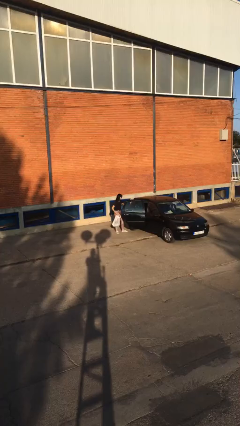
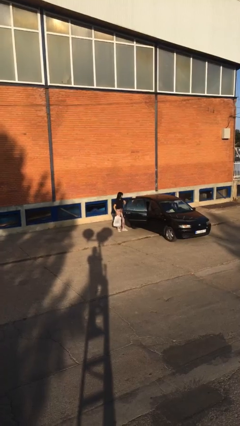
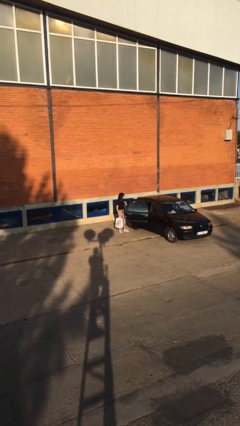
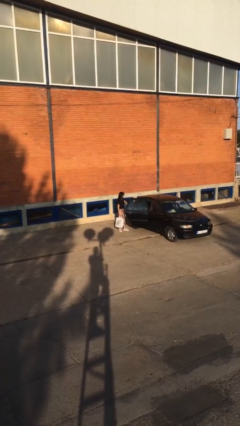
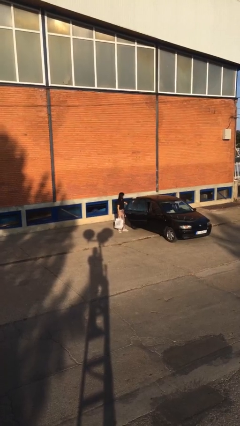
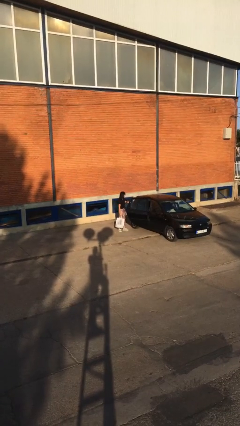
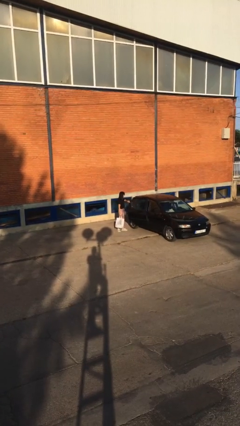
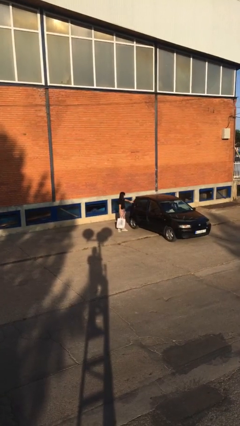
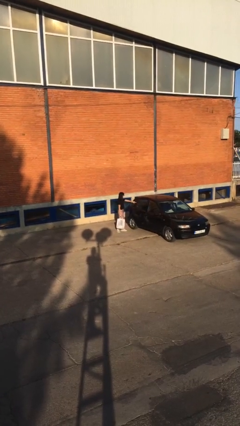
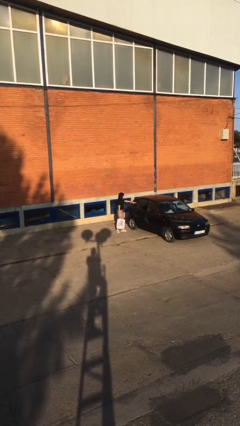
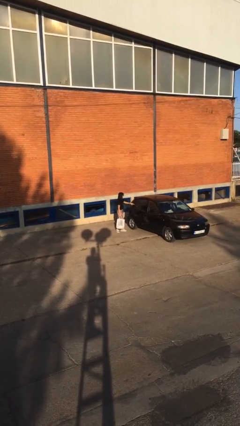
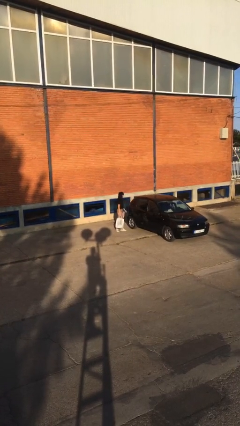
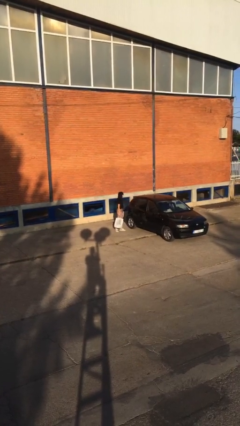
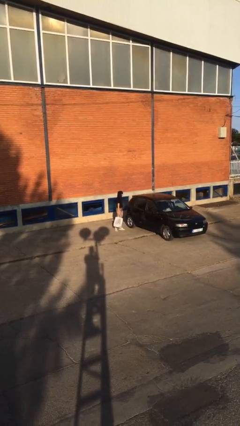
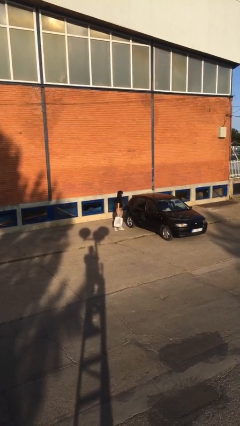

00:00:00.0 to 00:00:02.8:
person closes car door

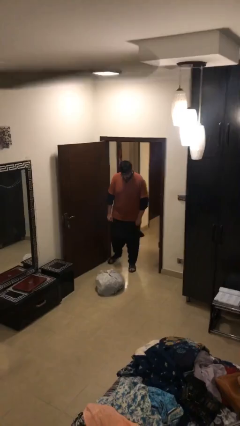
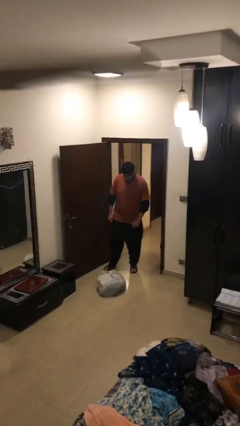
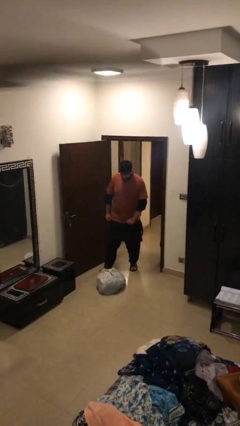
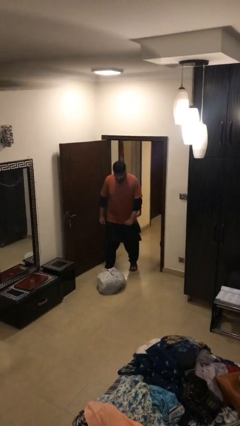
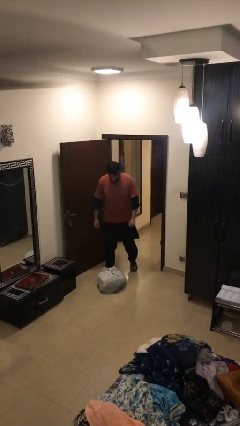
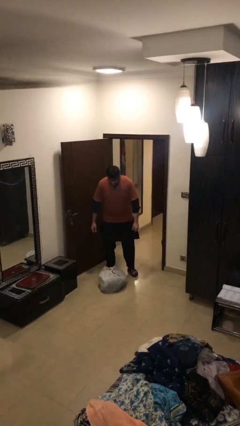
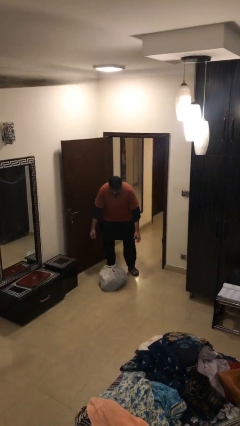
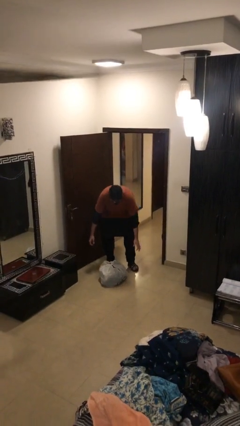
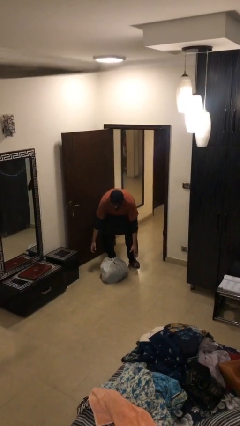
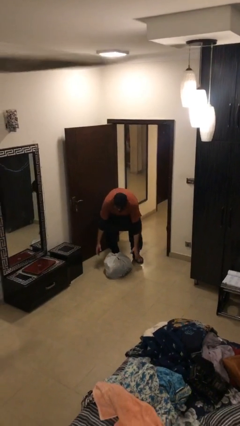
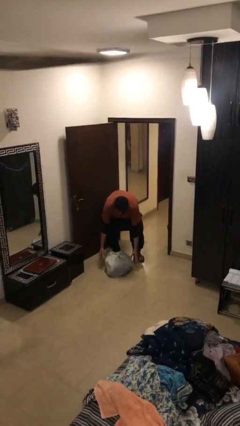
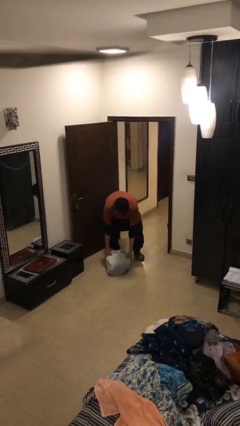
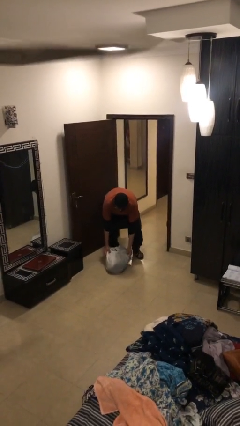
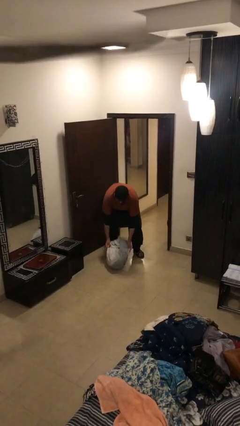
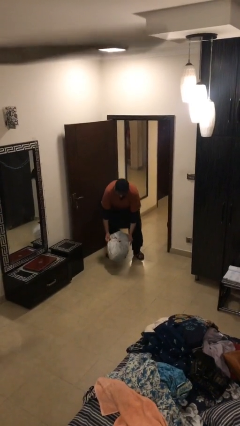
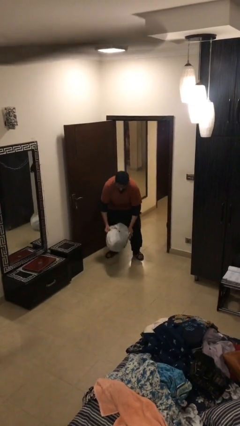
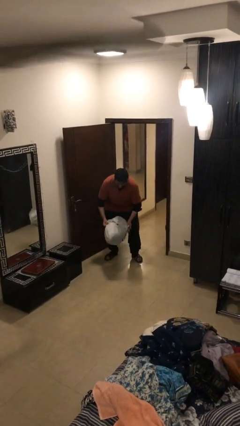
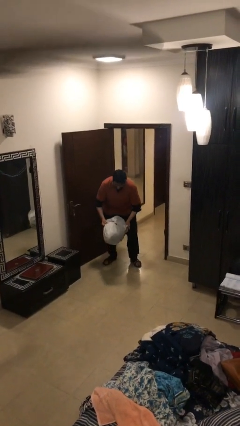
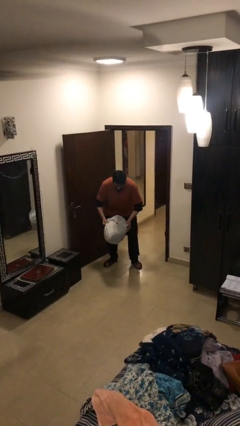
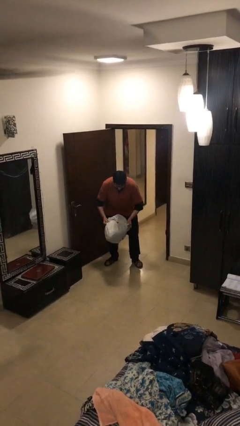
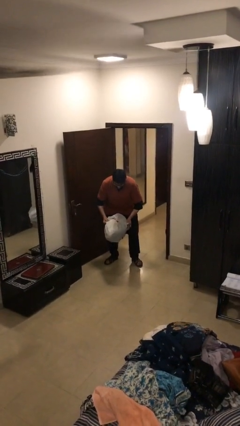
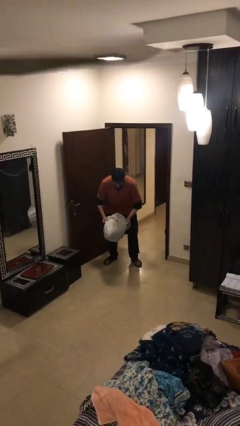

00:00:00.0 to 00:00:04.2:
person picks up object from floor

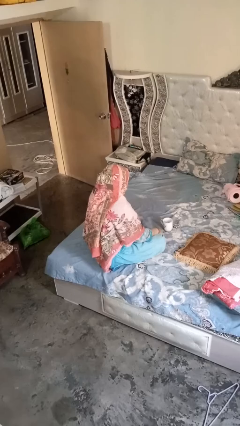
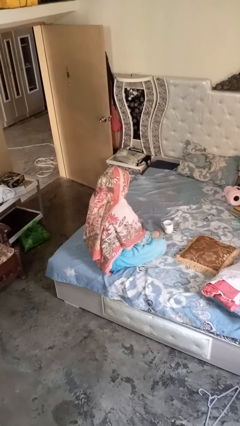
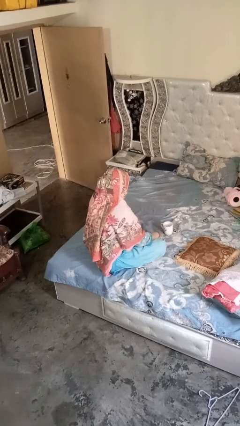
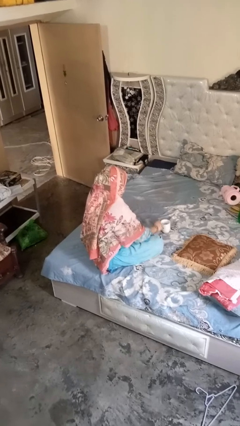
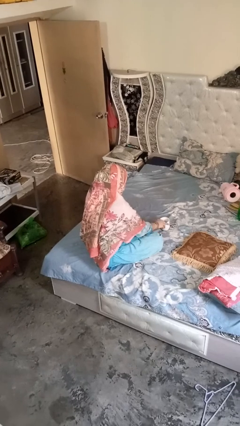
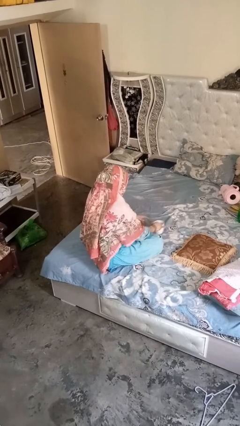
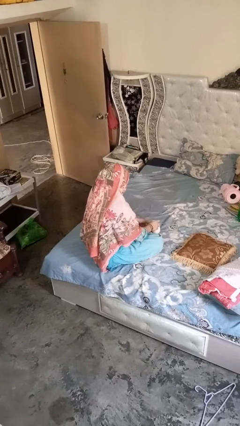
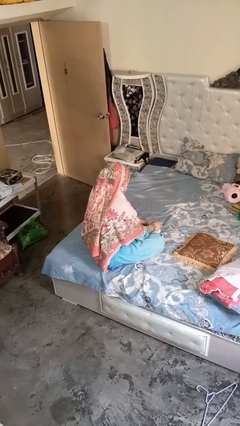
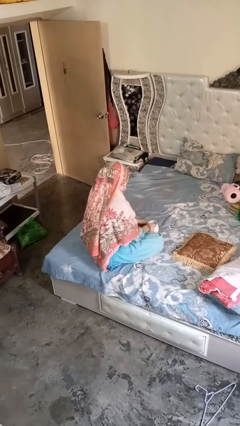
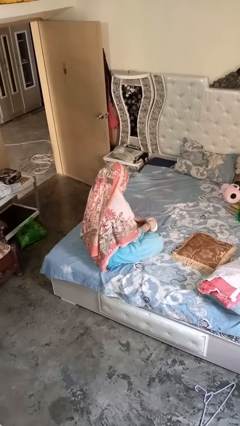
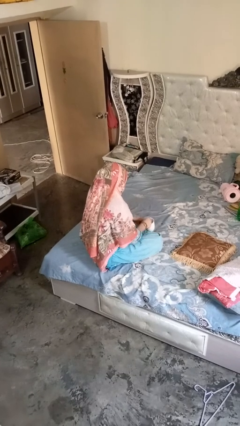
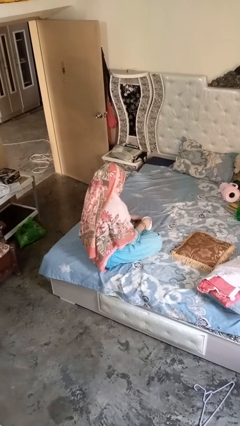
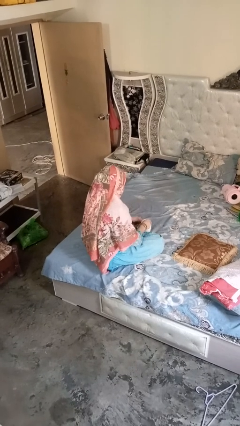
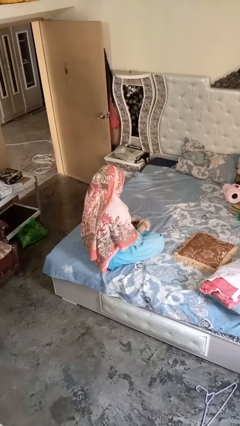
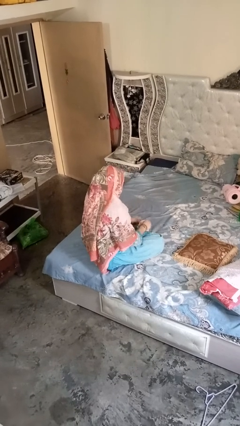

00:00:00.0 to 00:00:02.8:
person stirs mug

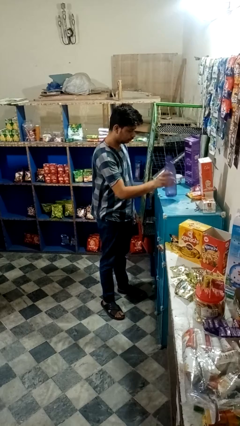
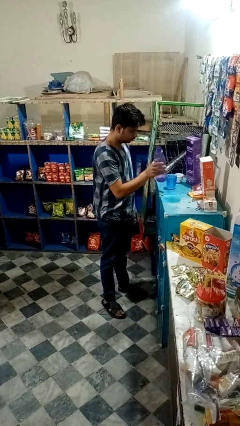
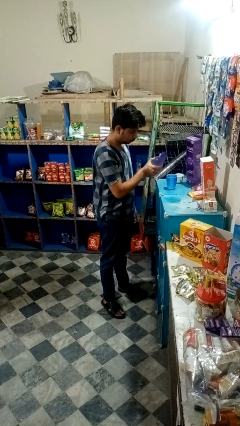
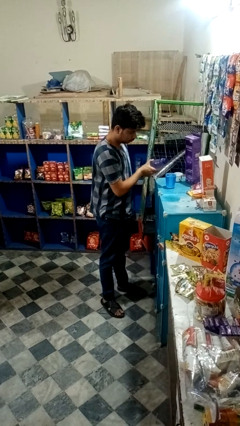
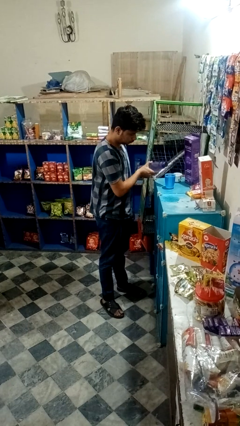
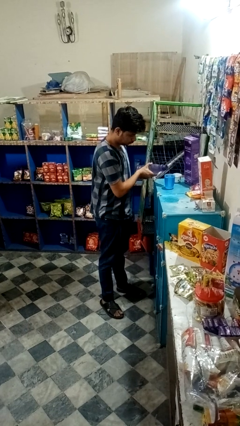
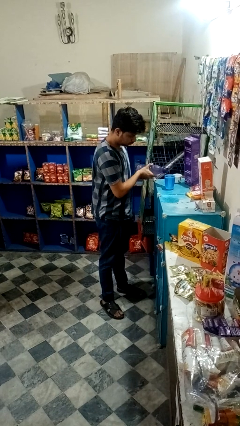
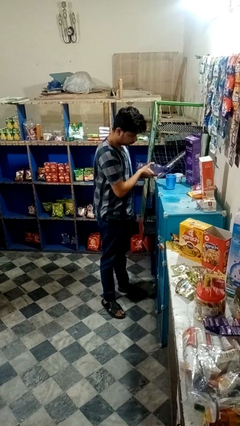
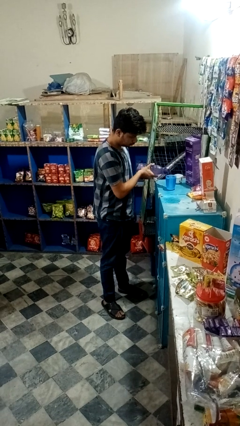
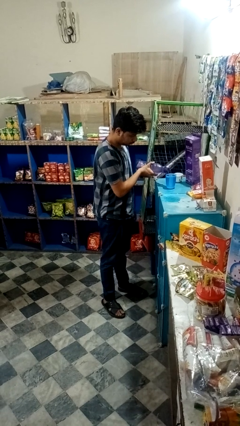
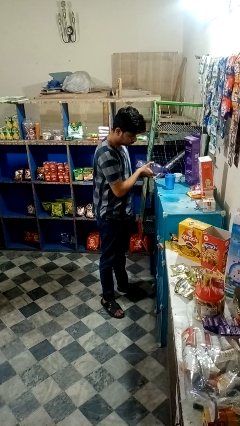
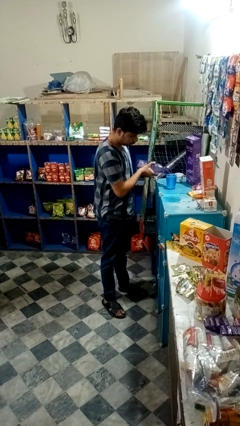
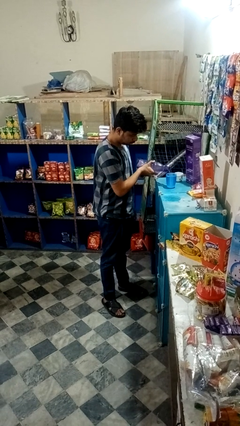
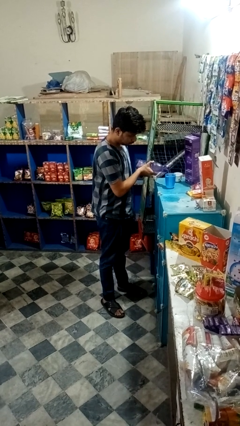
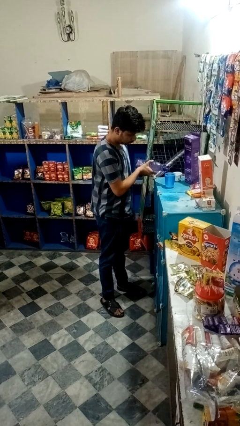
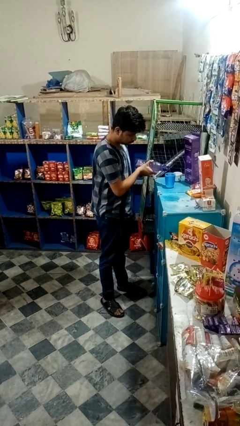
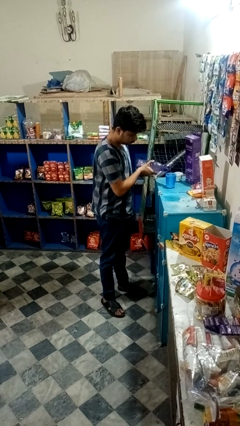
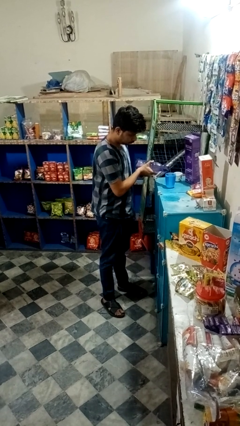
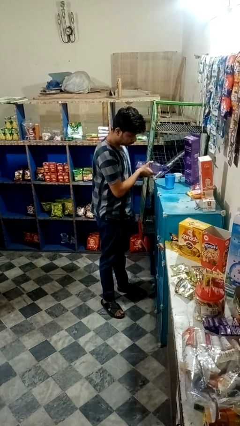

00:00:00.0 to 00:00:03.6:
person pours liquid into cup

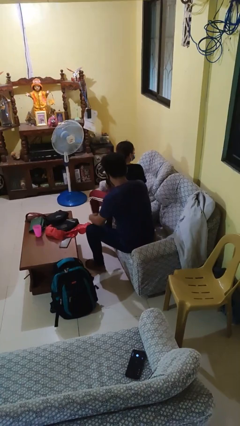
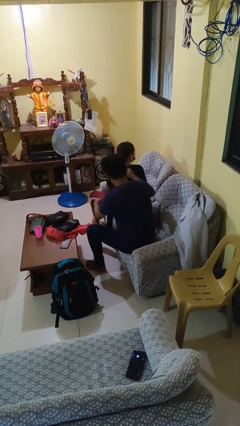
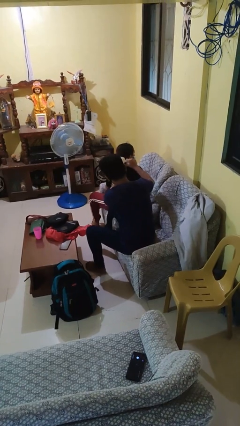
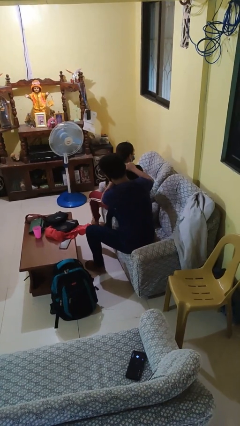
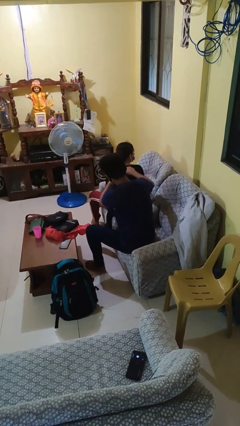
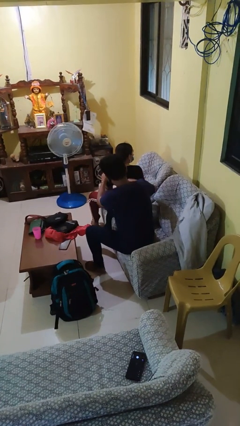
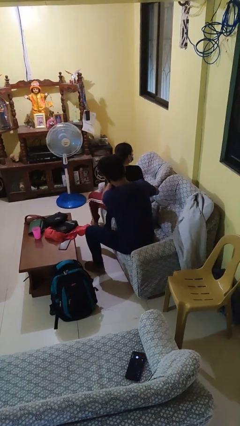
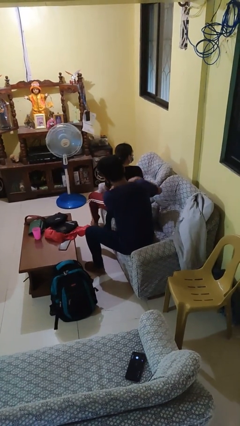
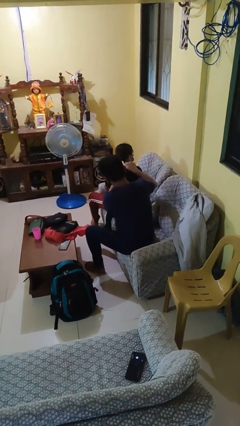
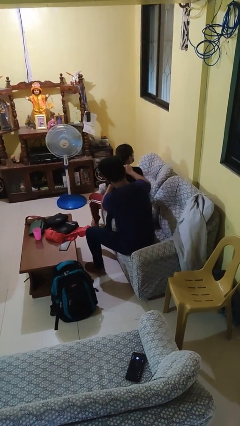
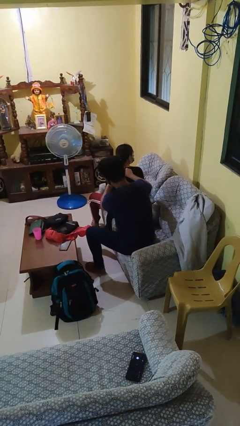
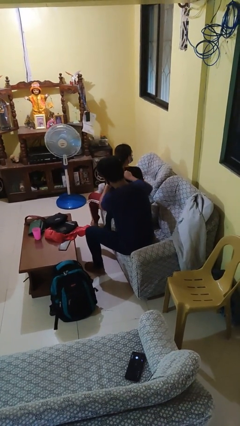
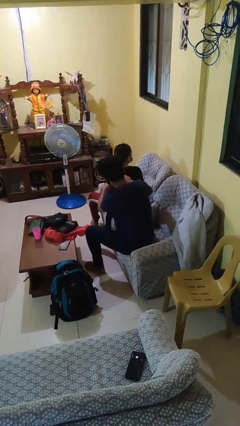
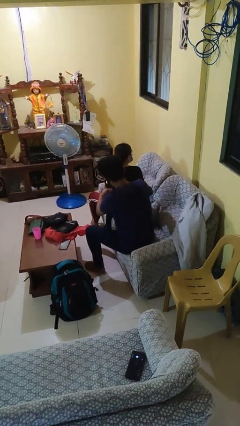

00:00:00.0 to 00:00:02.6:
person brushes hair of person

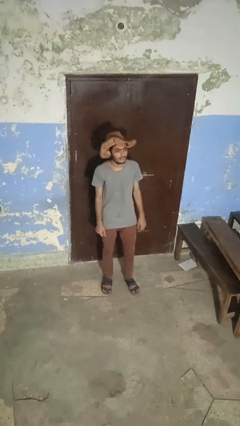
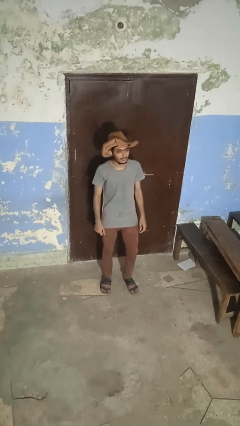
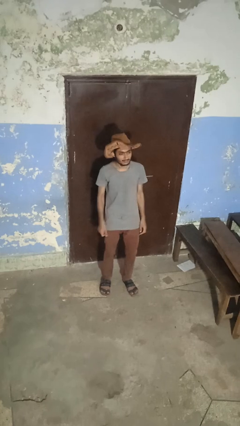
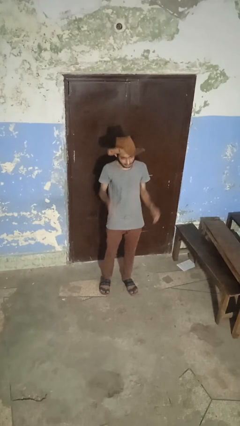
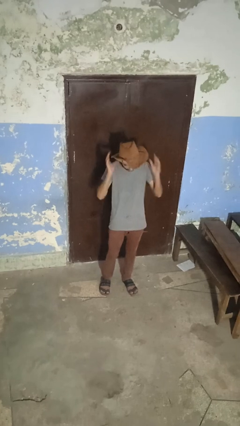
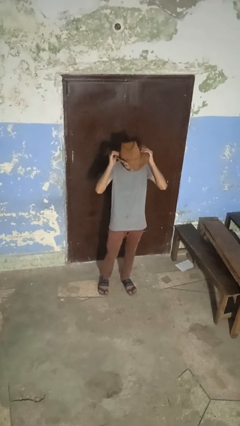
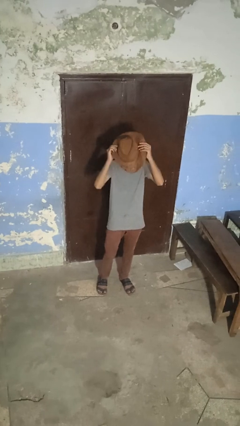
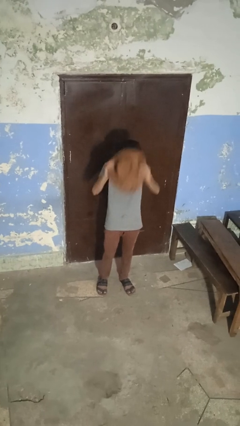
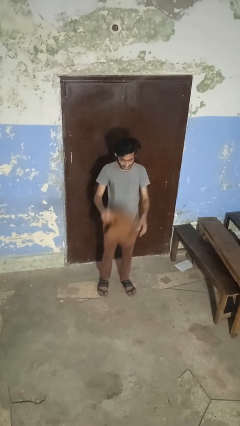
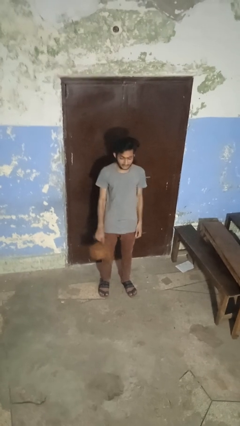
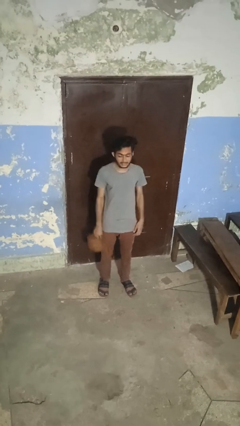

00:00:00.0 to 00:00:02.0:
person takes off hat
